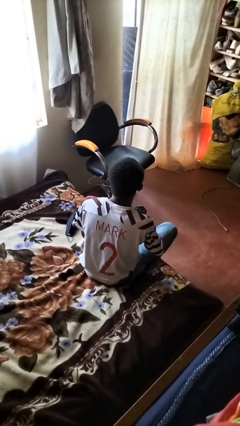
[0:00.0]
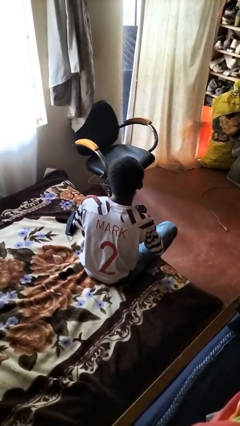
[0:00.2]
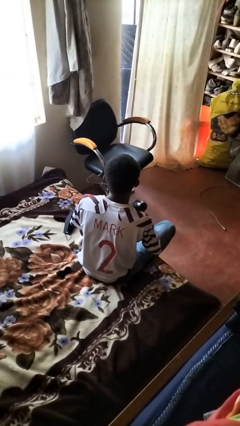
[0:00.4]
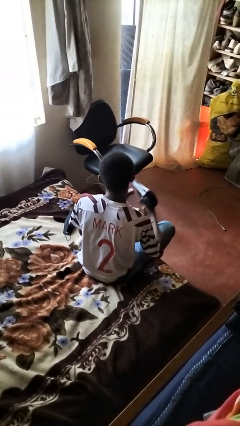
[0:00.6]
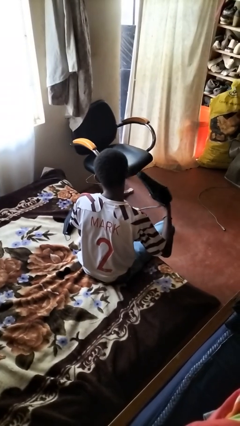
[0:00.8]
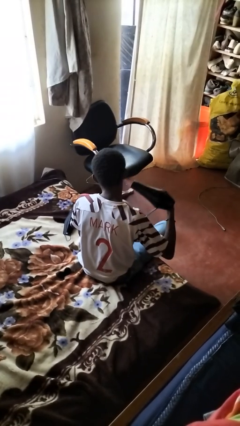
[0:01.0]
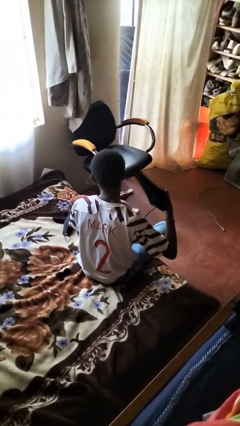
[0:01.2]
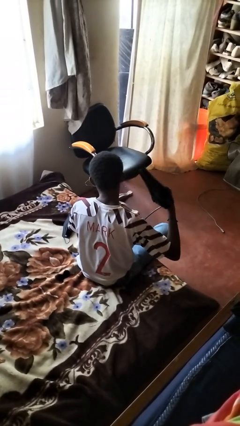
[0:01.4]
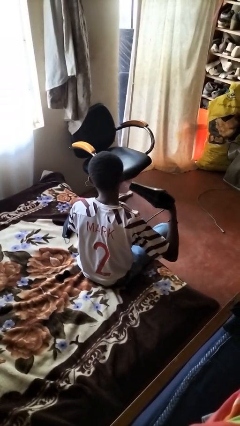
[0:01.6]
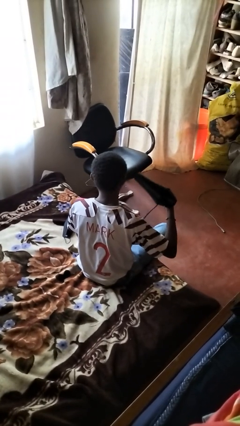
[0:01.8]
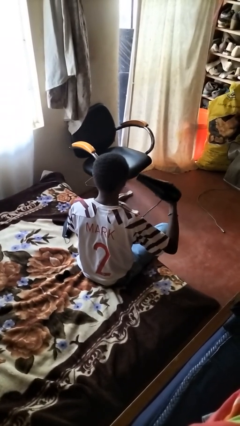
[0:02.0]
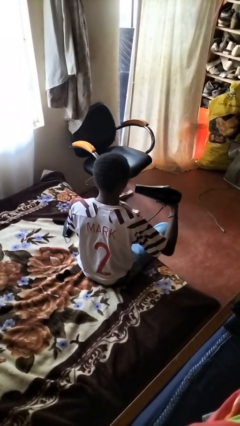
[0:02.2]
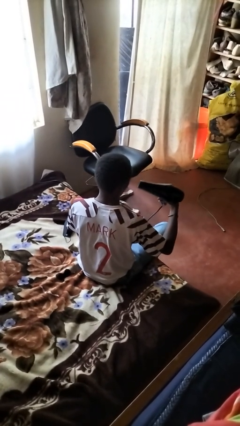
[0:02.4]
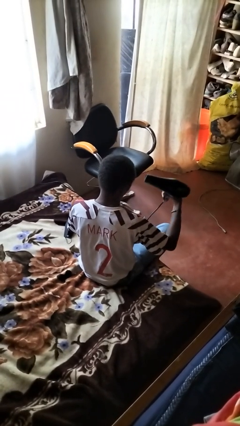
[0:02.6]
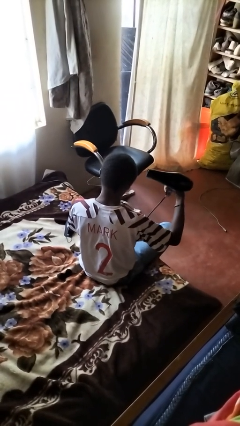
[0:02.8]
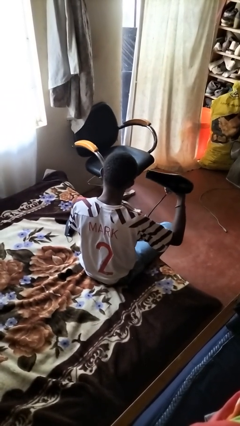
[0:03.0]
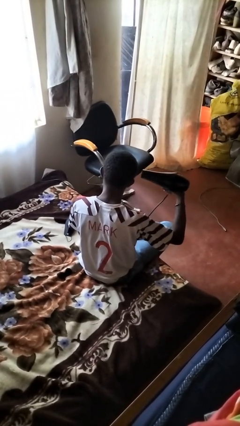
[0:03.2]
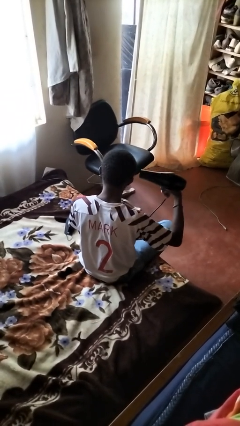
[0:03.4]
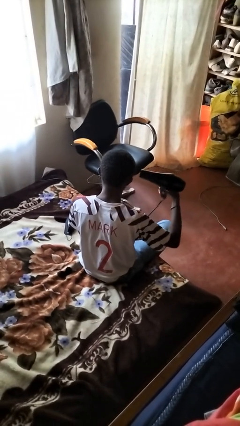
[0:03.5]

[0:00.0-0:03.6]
person dries hair with hairdryer

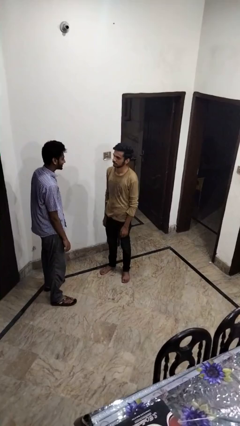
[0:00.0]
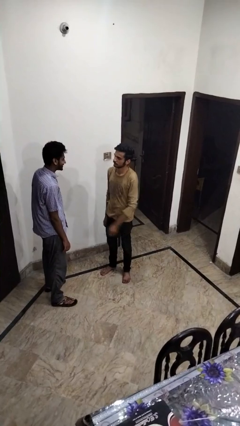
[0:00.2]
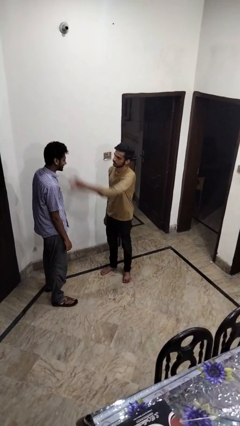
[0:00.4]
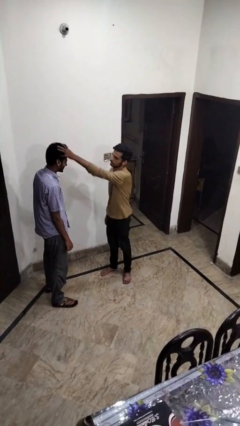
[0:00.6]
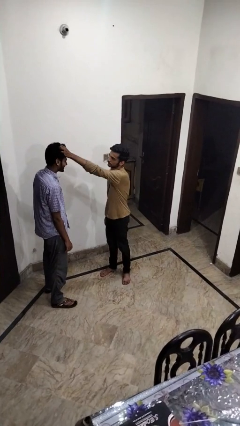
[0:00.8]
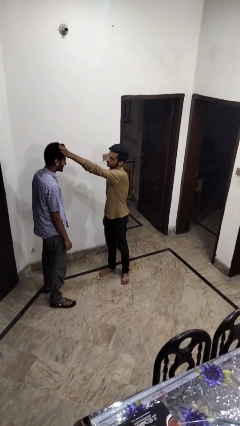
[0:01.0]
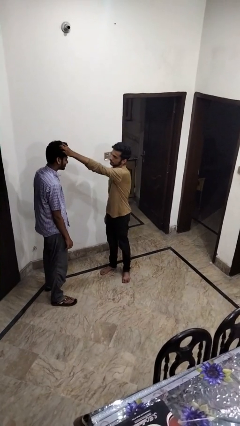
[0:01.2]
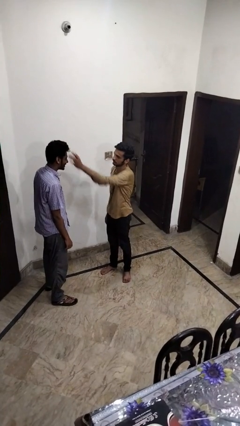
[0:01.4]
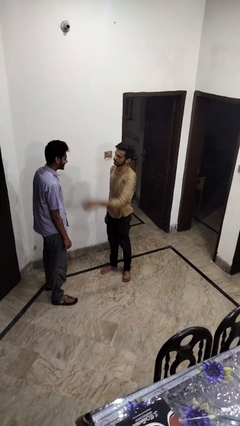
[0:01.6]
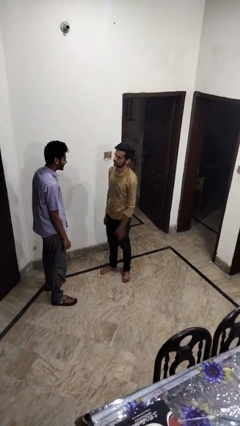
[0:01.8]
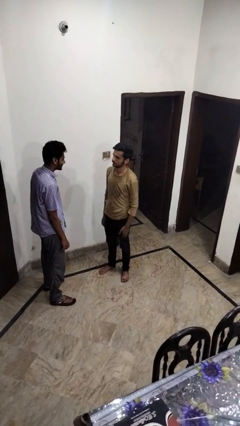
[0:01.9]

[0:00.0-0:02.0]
person grabs person by hair

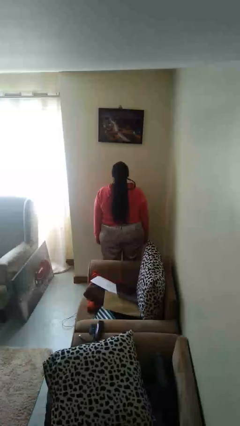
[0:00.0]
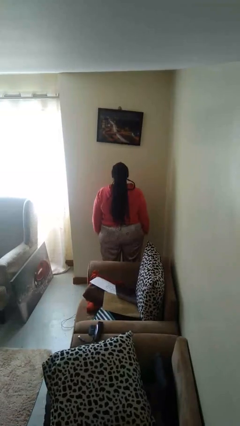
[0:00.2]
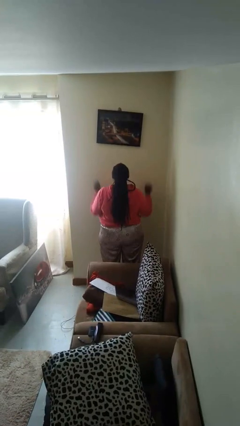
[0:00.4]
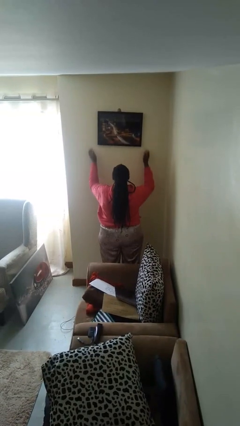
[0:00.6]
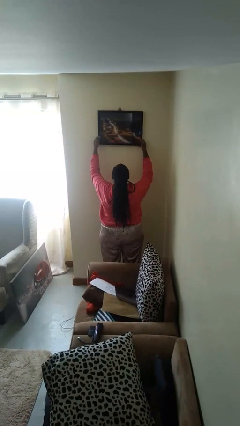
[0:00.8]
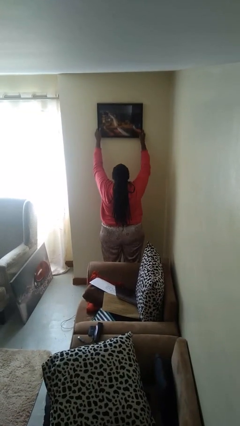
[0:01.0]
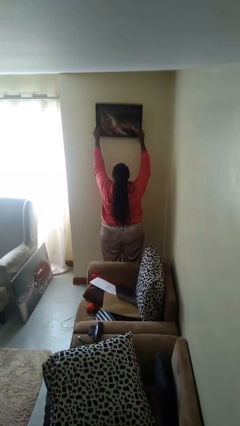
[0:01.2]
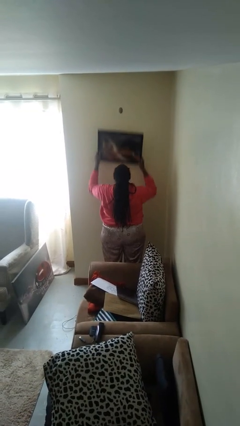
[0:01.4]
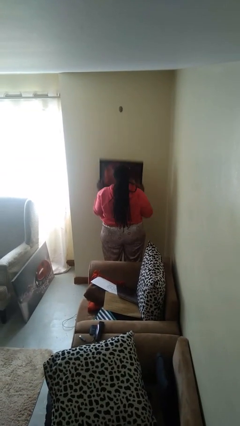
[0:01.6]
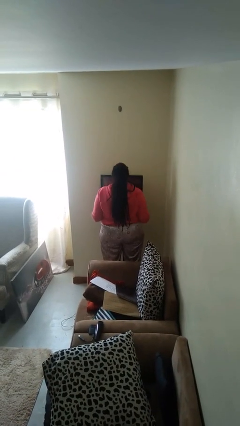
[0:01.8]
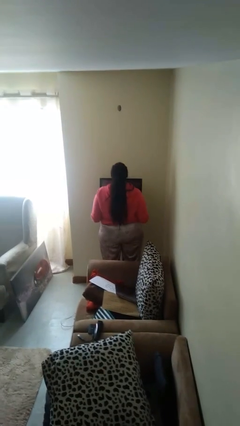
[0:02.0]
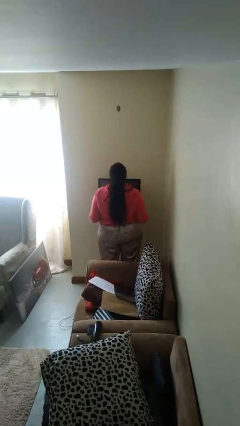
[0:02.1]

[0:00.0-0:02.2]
person takes down picture frame

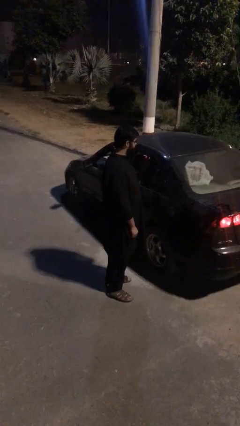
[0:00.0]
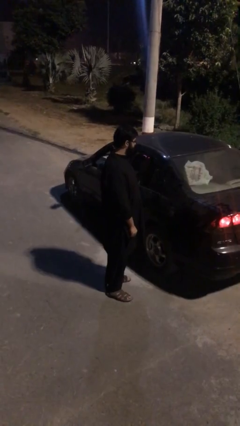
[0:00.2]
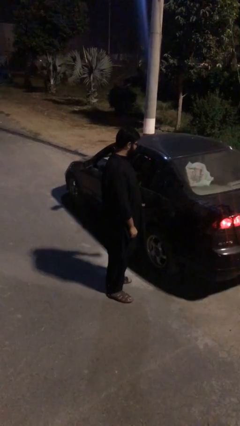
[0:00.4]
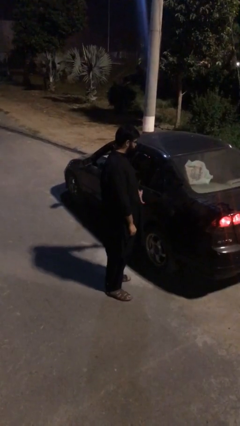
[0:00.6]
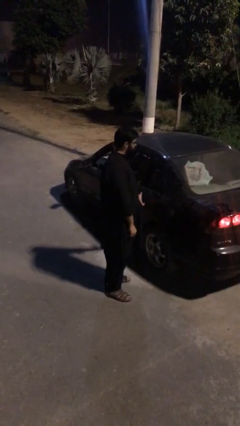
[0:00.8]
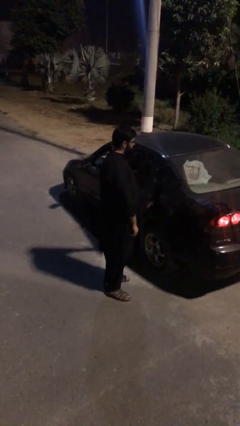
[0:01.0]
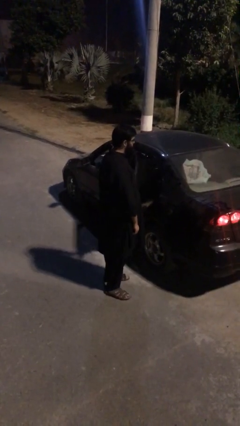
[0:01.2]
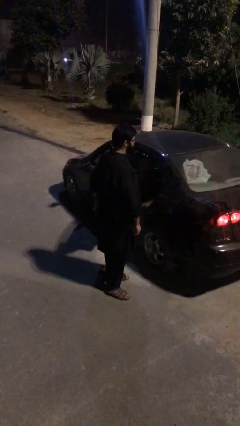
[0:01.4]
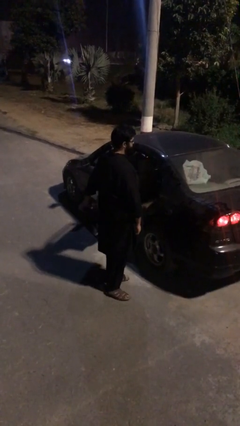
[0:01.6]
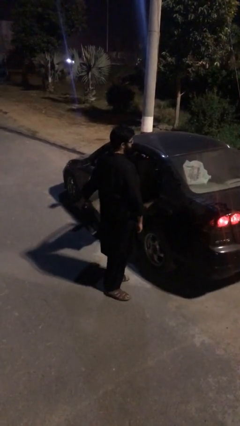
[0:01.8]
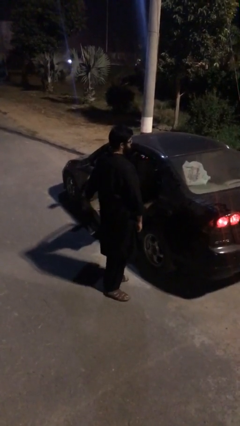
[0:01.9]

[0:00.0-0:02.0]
person opens car door

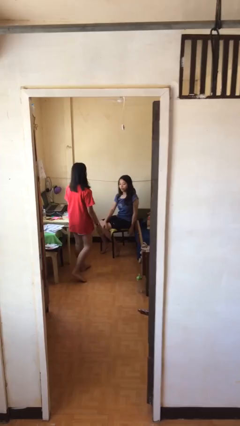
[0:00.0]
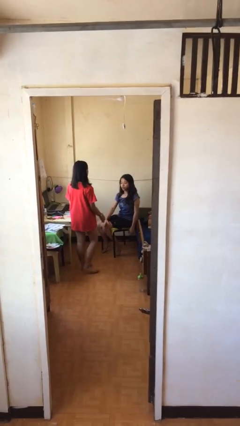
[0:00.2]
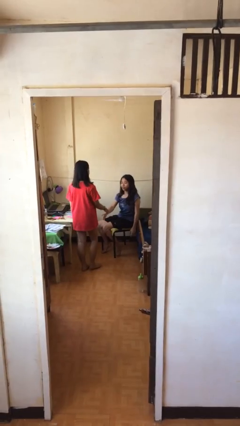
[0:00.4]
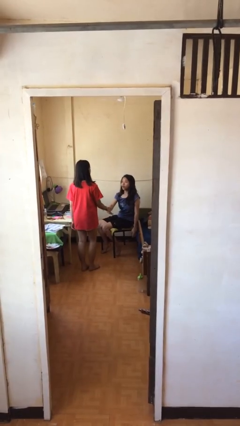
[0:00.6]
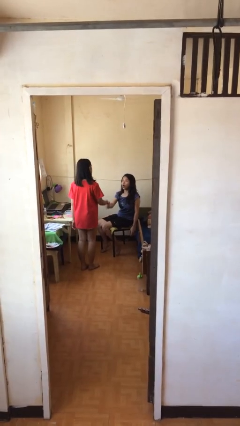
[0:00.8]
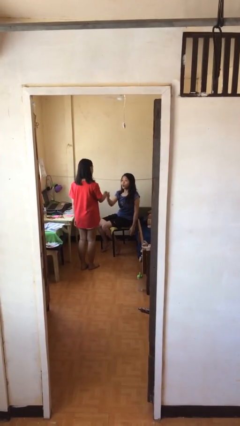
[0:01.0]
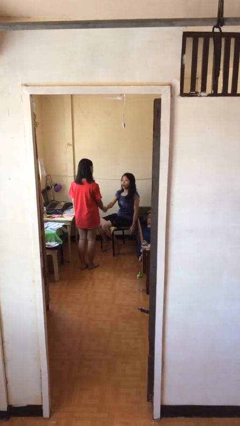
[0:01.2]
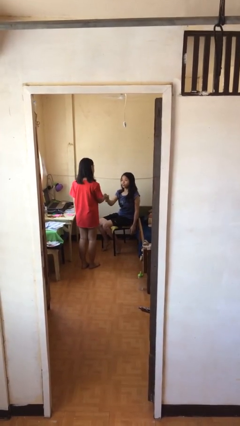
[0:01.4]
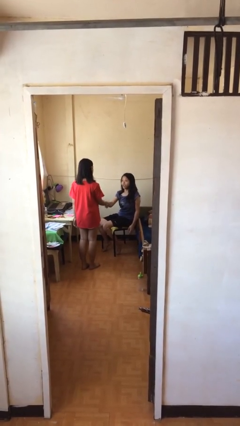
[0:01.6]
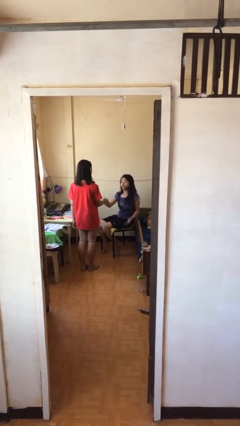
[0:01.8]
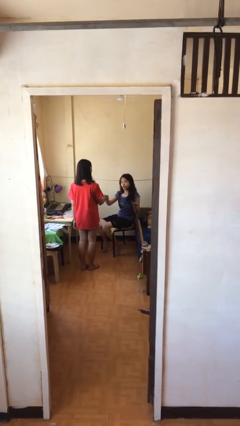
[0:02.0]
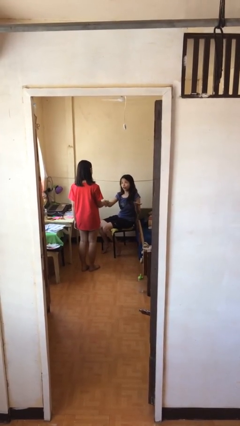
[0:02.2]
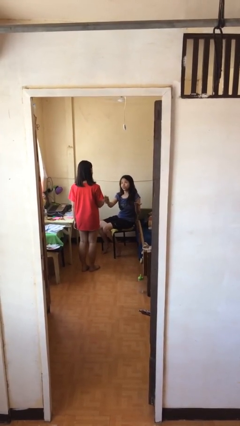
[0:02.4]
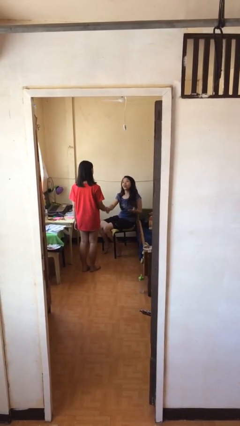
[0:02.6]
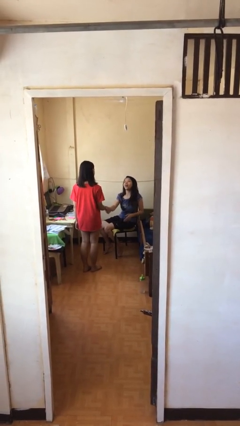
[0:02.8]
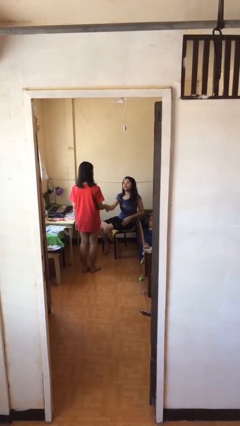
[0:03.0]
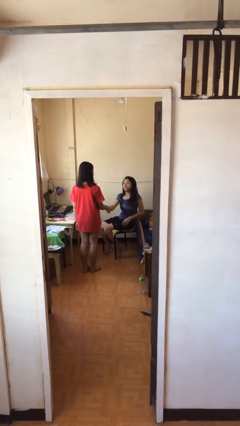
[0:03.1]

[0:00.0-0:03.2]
person shakes hand

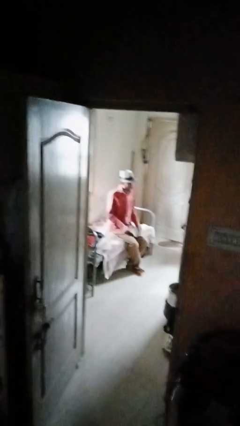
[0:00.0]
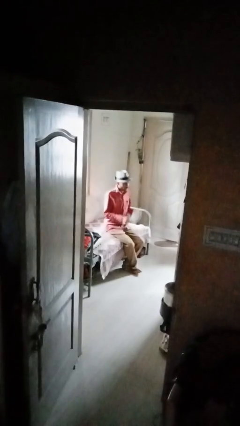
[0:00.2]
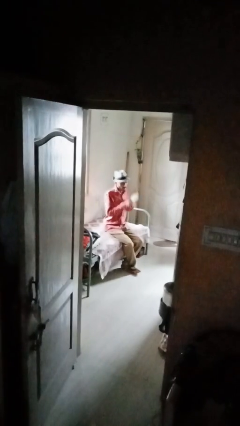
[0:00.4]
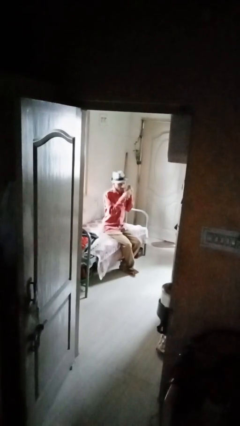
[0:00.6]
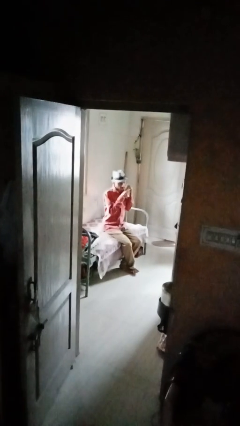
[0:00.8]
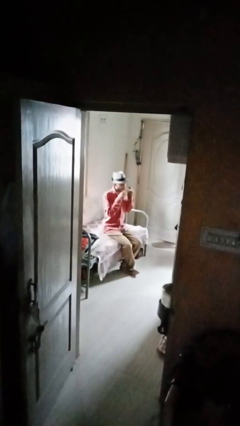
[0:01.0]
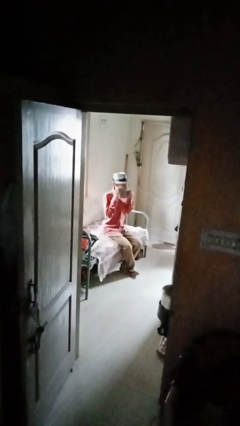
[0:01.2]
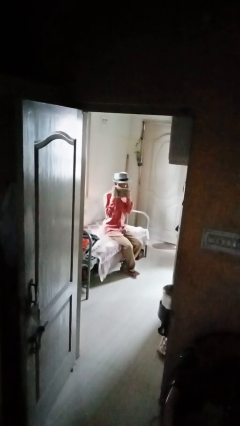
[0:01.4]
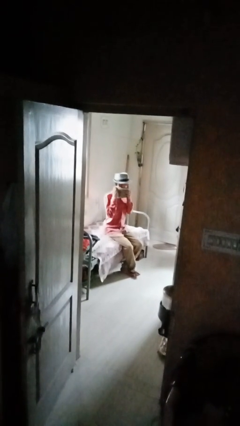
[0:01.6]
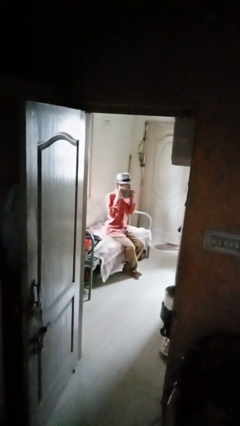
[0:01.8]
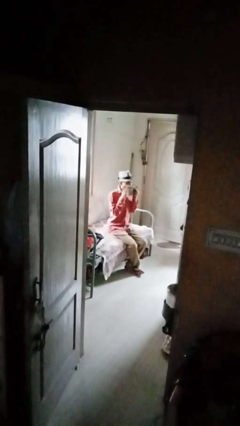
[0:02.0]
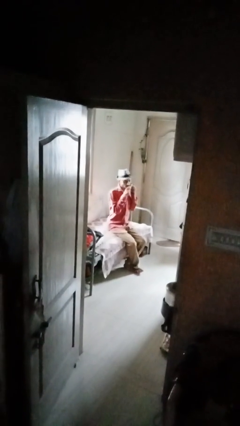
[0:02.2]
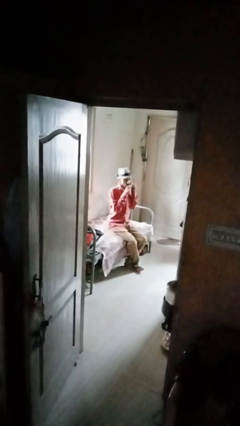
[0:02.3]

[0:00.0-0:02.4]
person wipes mouth with napkin

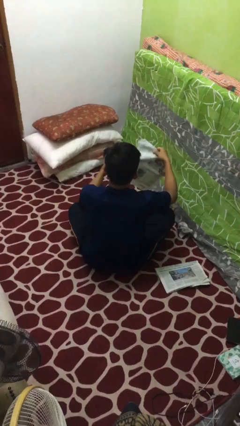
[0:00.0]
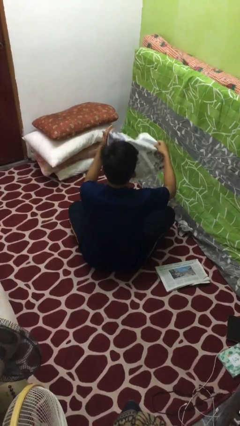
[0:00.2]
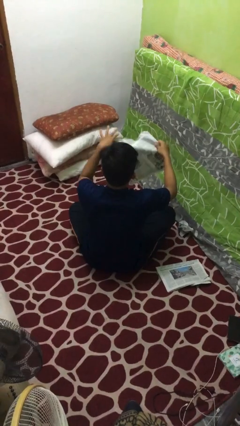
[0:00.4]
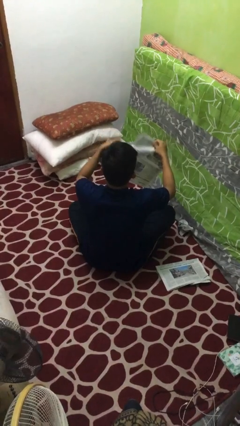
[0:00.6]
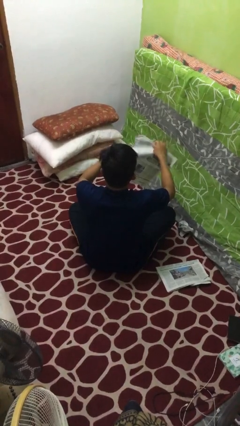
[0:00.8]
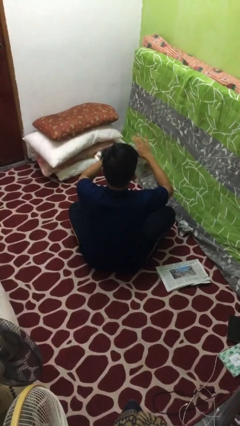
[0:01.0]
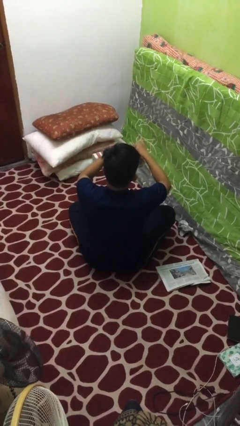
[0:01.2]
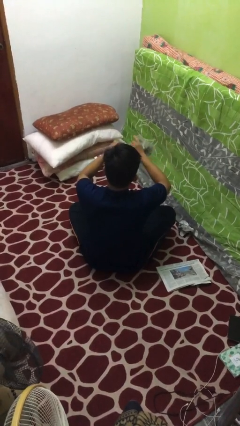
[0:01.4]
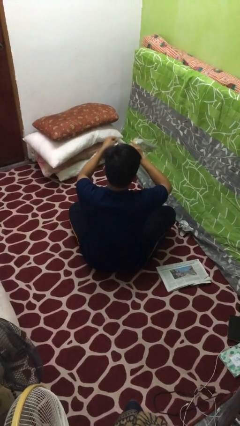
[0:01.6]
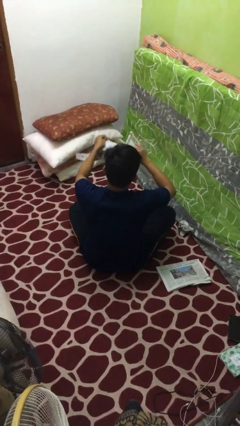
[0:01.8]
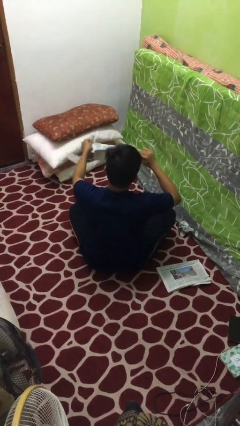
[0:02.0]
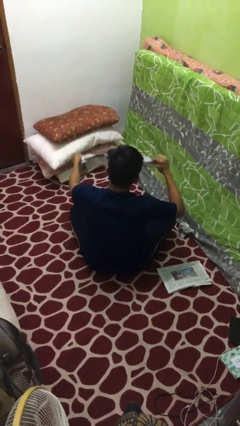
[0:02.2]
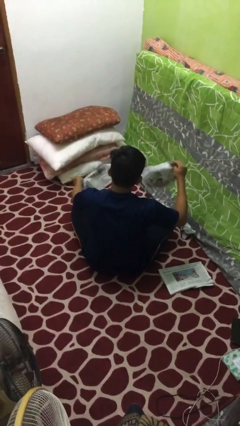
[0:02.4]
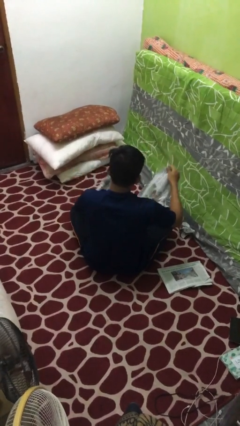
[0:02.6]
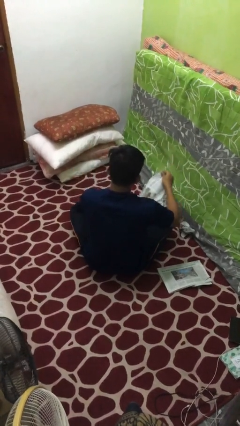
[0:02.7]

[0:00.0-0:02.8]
person tears paper
